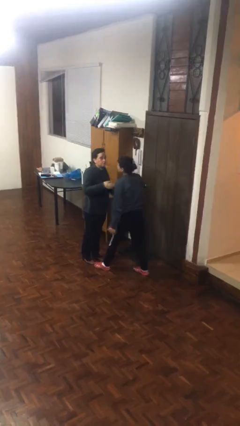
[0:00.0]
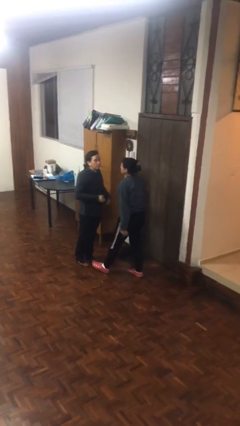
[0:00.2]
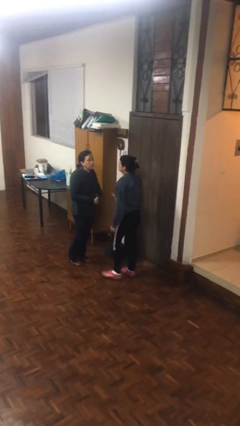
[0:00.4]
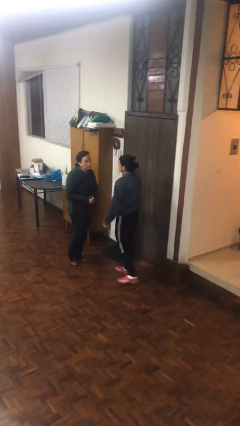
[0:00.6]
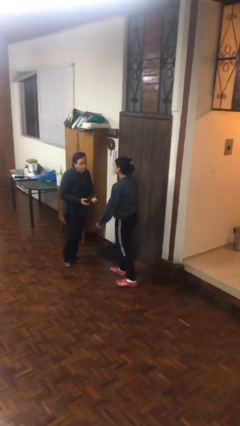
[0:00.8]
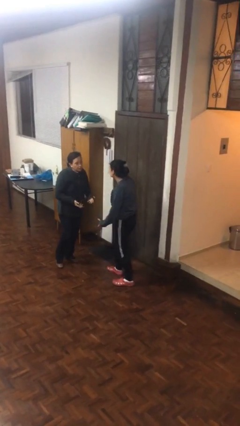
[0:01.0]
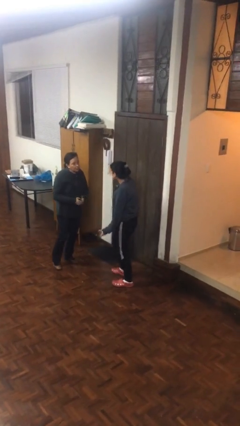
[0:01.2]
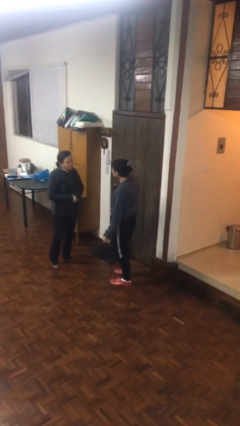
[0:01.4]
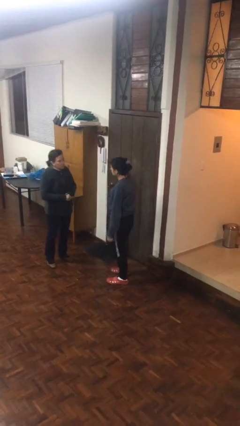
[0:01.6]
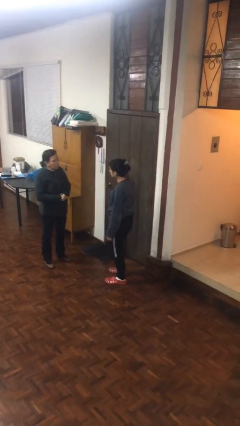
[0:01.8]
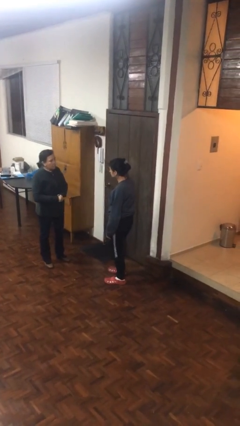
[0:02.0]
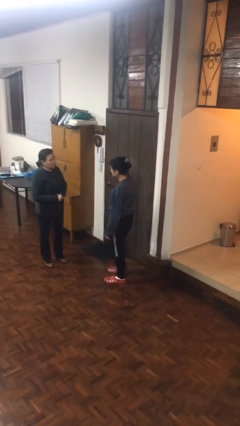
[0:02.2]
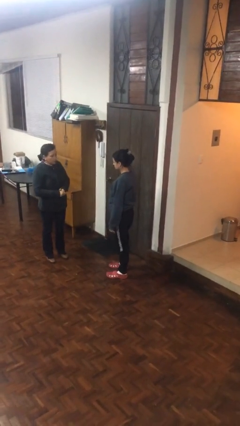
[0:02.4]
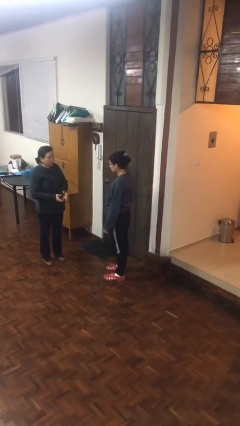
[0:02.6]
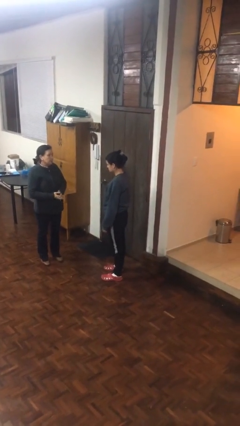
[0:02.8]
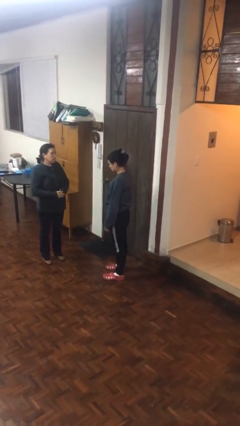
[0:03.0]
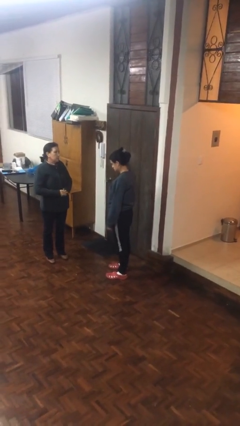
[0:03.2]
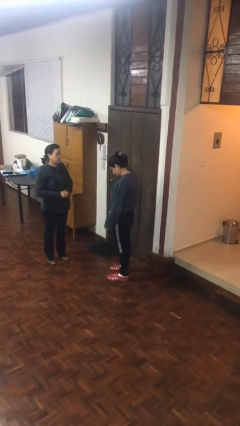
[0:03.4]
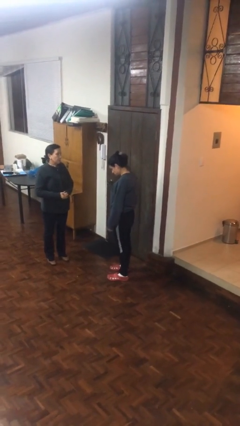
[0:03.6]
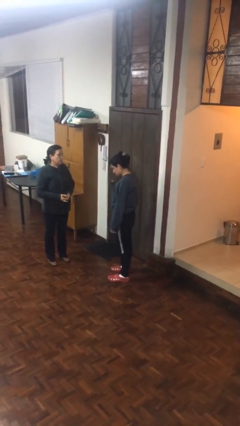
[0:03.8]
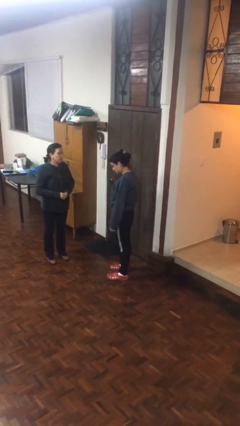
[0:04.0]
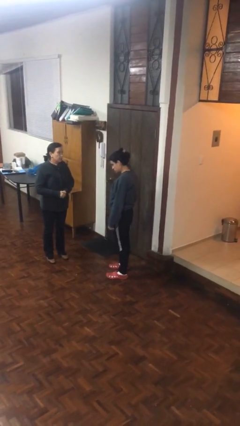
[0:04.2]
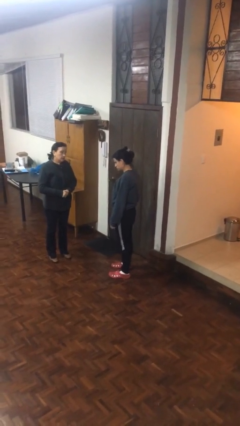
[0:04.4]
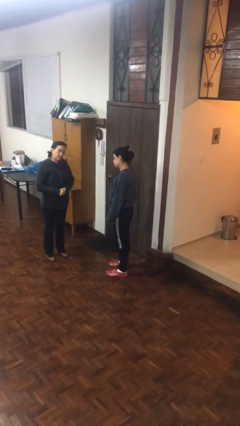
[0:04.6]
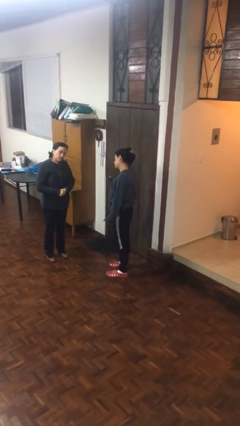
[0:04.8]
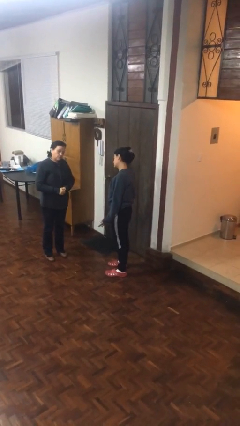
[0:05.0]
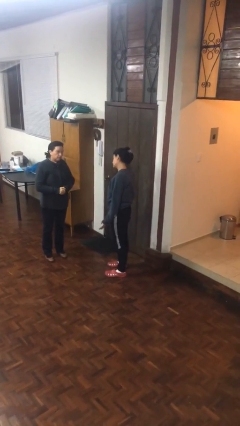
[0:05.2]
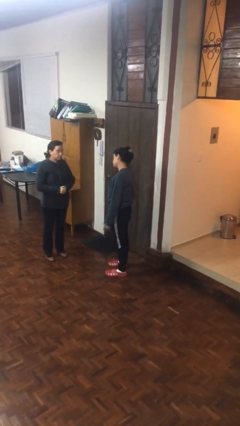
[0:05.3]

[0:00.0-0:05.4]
person talks to person

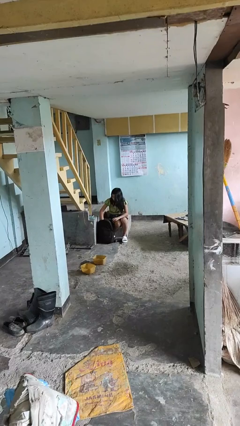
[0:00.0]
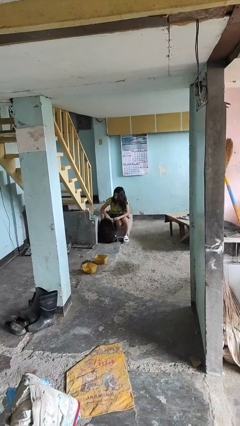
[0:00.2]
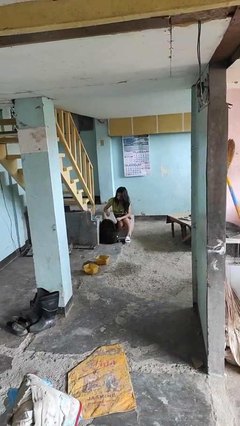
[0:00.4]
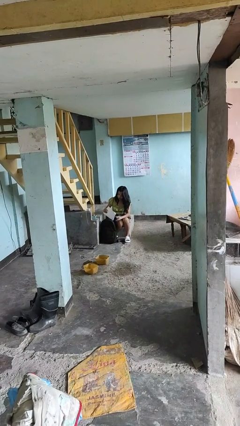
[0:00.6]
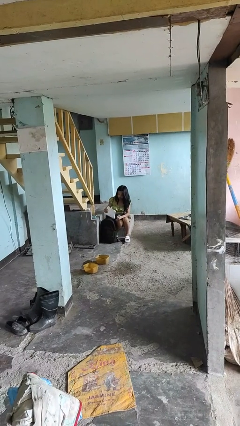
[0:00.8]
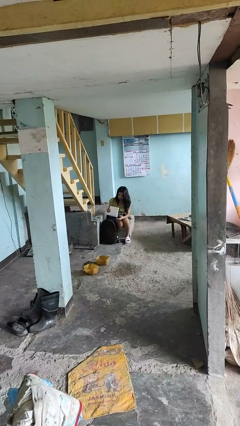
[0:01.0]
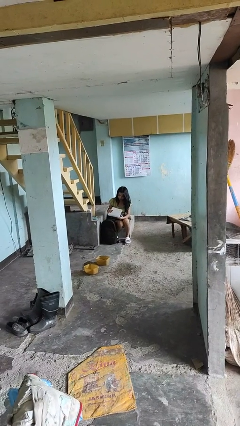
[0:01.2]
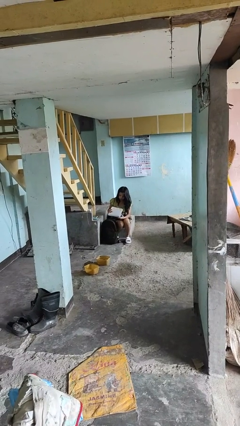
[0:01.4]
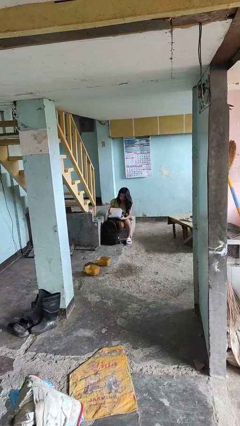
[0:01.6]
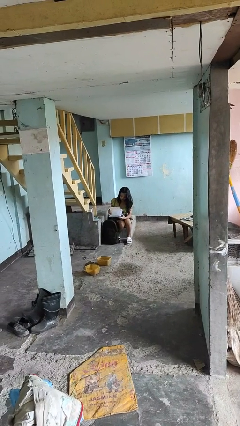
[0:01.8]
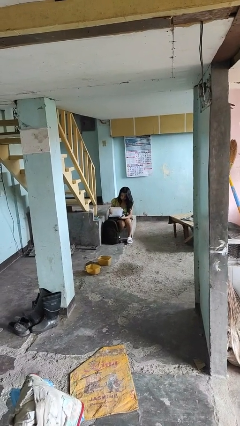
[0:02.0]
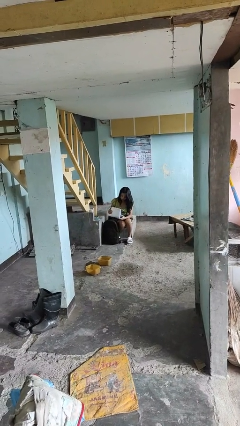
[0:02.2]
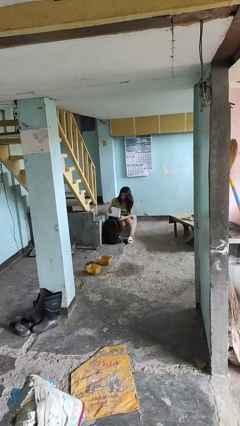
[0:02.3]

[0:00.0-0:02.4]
person takes object from backpack

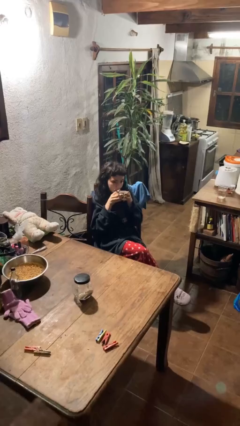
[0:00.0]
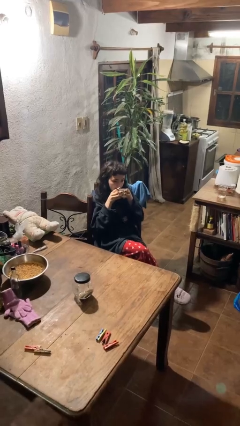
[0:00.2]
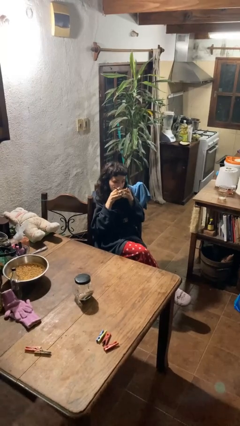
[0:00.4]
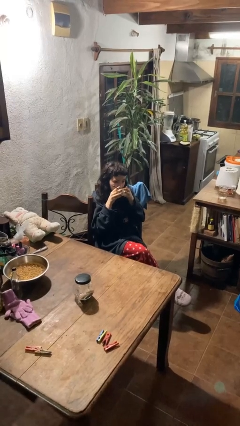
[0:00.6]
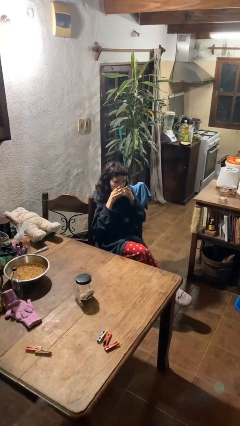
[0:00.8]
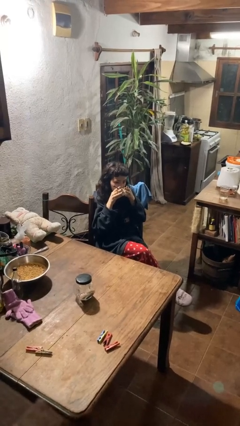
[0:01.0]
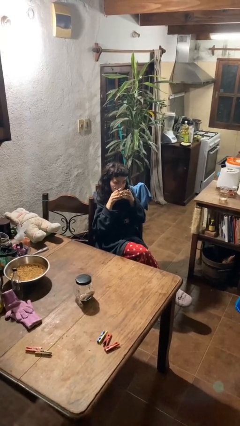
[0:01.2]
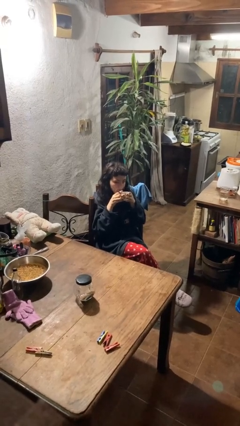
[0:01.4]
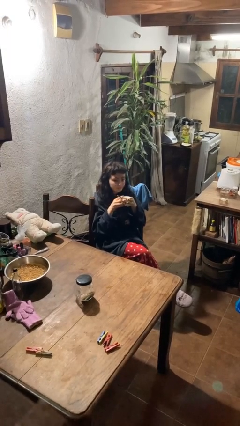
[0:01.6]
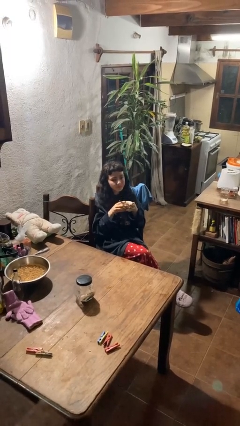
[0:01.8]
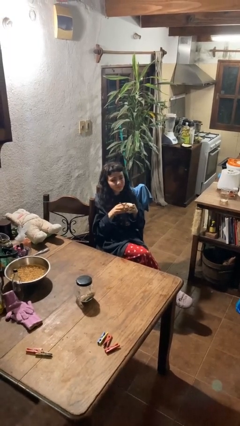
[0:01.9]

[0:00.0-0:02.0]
person drinks from mug

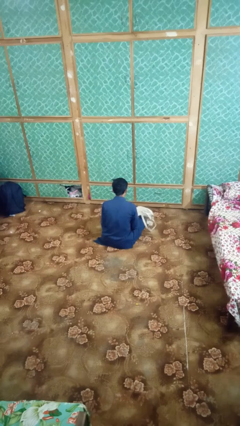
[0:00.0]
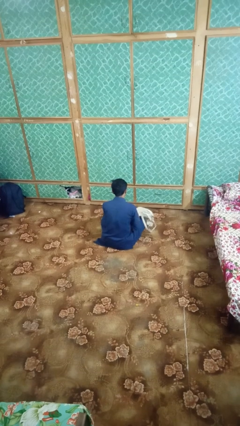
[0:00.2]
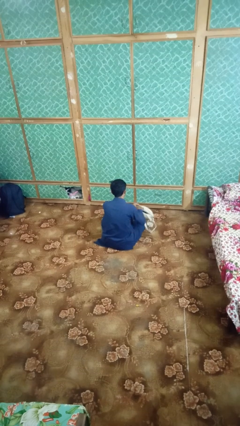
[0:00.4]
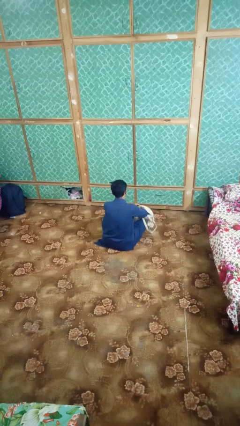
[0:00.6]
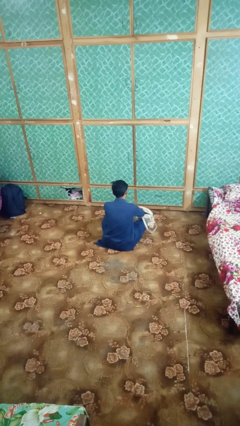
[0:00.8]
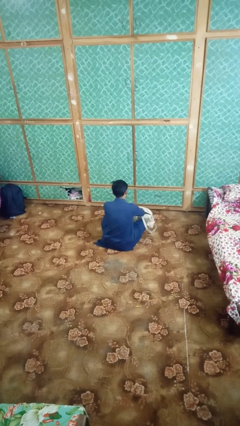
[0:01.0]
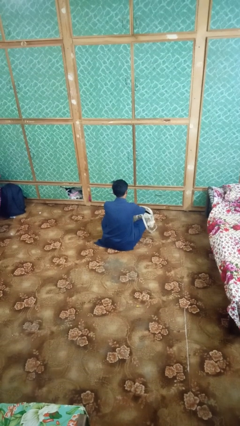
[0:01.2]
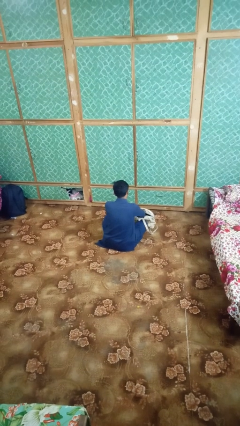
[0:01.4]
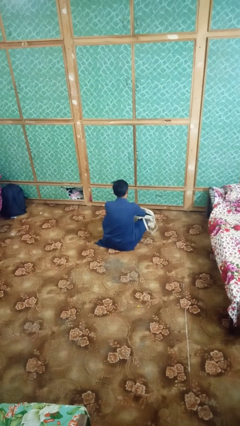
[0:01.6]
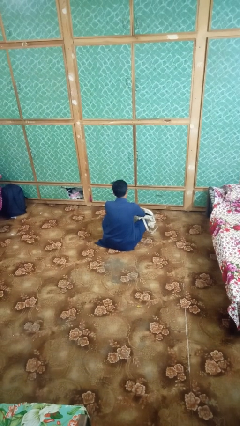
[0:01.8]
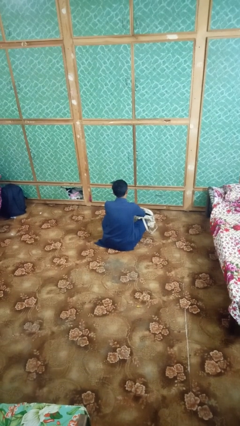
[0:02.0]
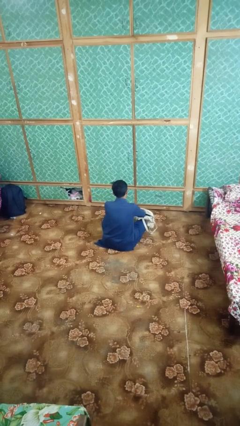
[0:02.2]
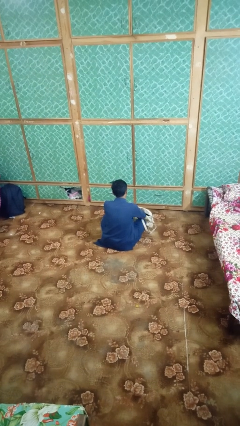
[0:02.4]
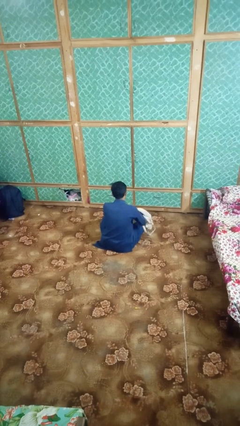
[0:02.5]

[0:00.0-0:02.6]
person searches in bag

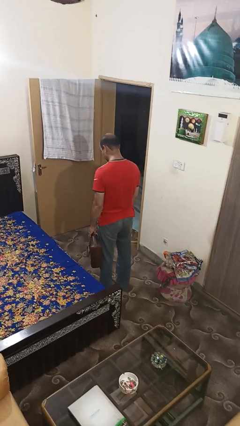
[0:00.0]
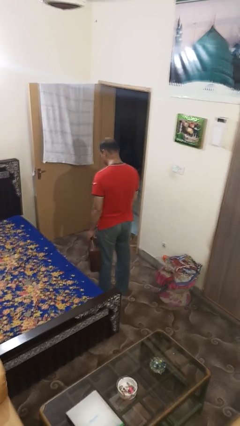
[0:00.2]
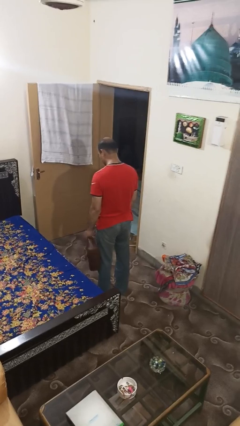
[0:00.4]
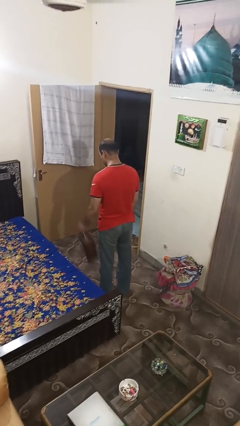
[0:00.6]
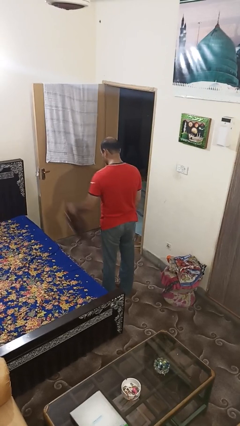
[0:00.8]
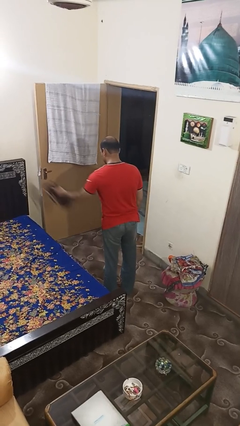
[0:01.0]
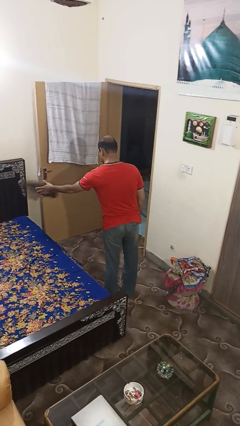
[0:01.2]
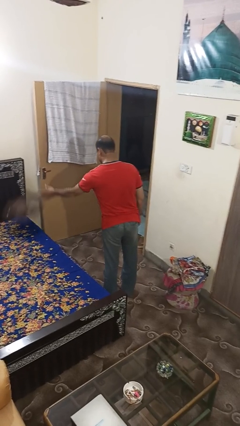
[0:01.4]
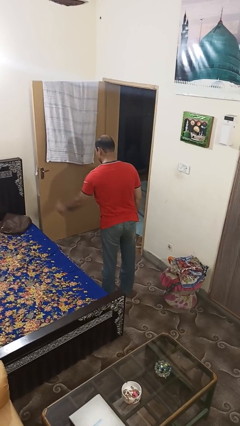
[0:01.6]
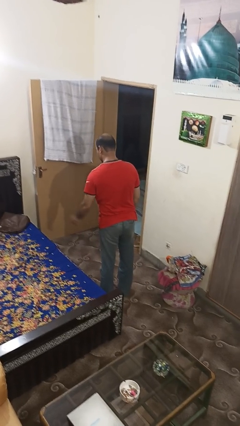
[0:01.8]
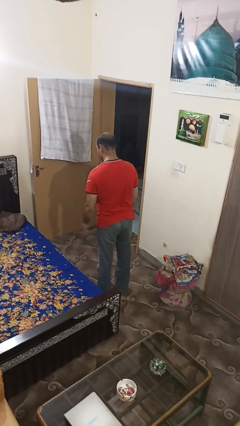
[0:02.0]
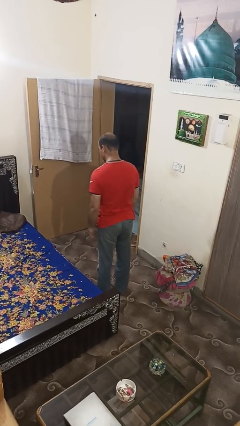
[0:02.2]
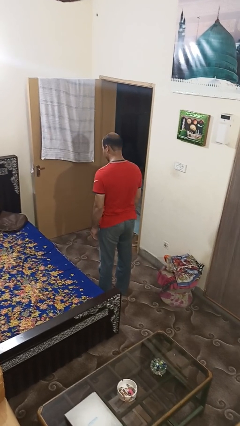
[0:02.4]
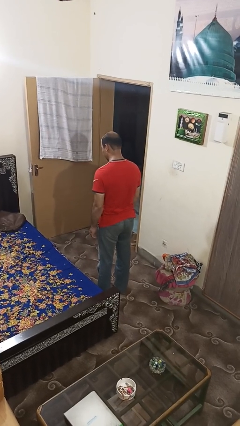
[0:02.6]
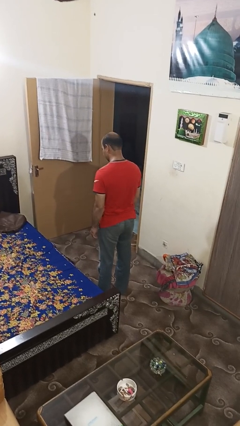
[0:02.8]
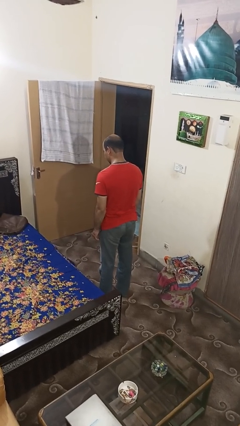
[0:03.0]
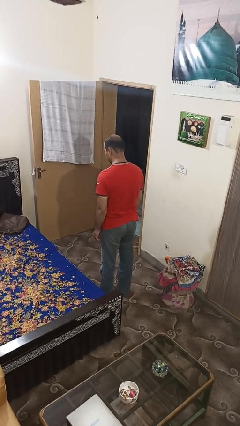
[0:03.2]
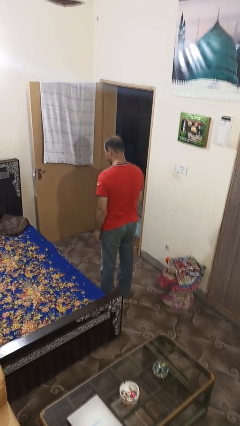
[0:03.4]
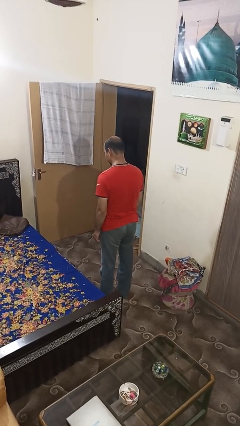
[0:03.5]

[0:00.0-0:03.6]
person throws object on bed

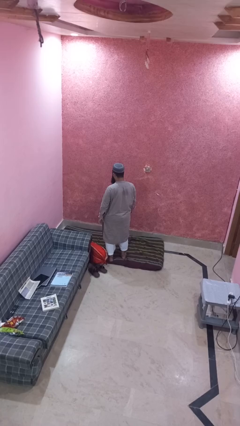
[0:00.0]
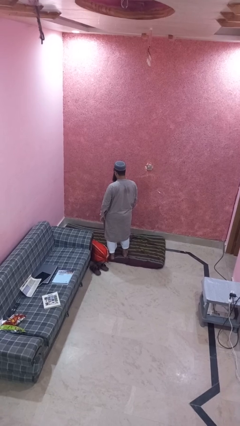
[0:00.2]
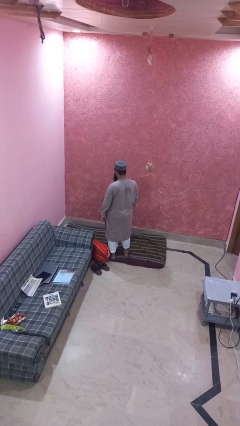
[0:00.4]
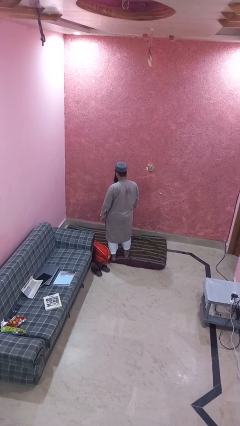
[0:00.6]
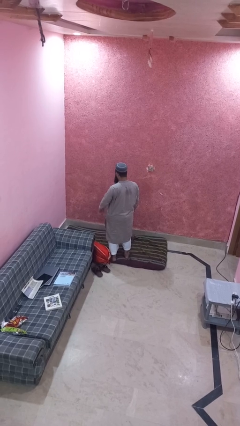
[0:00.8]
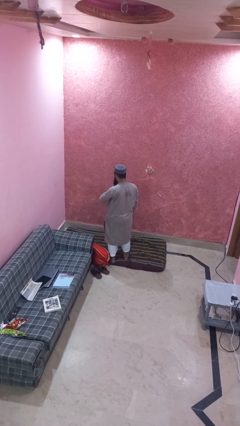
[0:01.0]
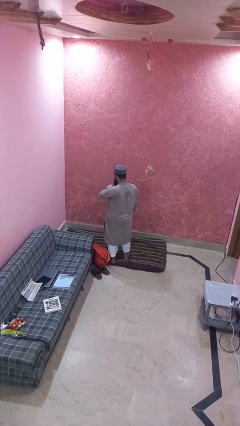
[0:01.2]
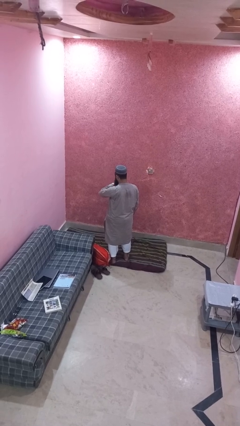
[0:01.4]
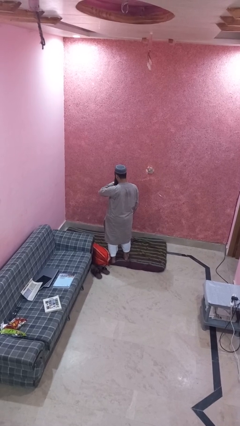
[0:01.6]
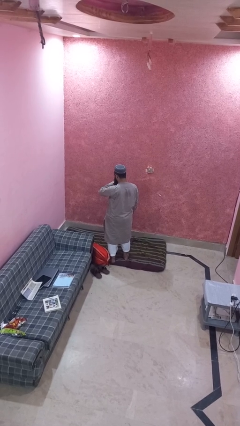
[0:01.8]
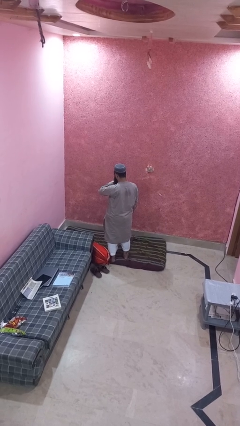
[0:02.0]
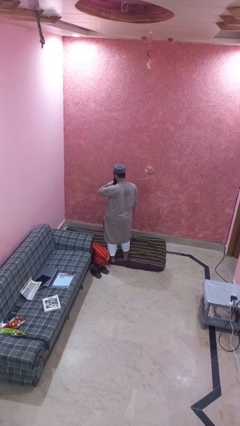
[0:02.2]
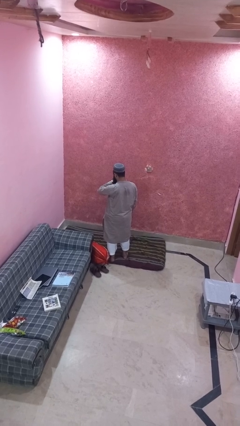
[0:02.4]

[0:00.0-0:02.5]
person looks at wristwatch
